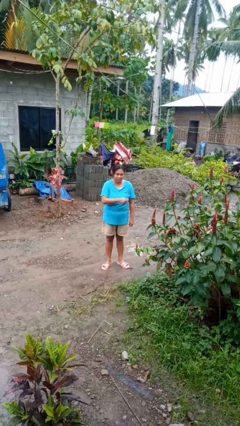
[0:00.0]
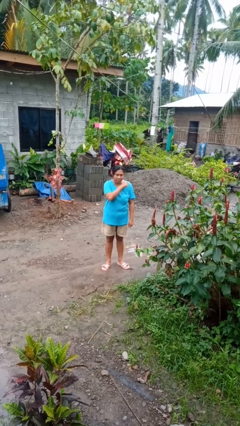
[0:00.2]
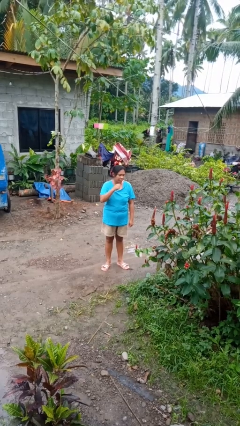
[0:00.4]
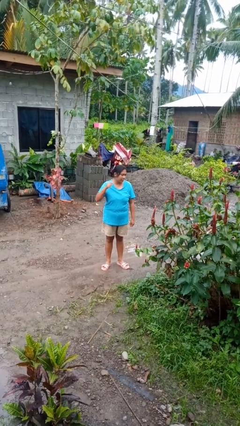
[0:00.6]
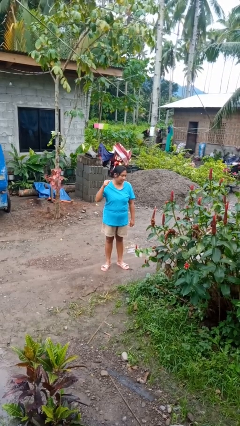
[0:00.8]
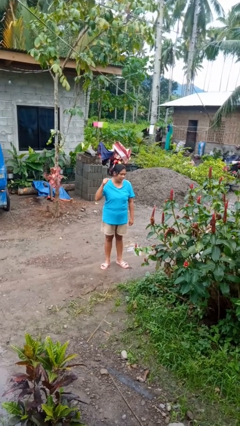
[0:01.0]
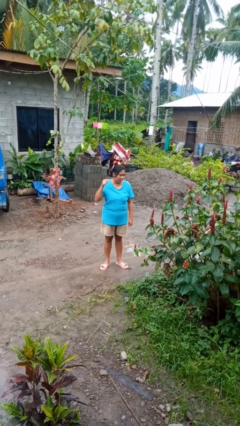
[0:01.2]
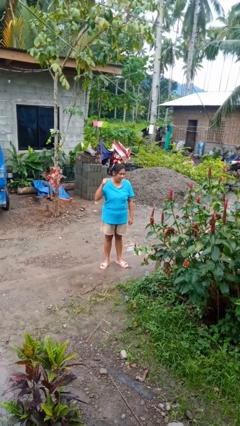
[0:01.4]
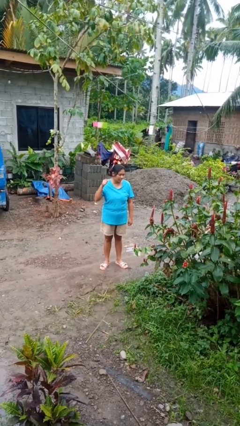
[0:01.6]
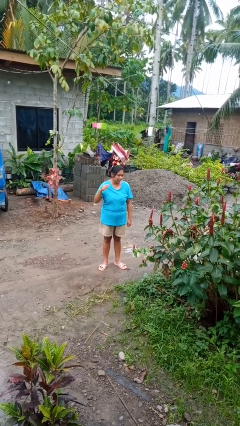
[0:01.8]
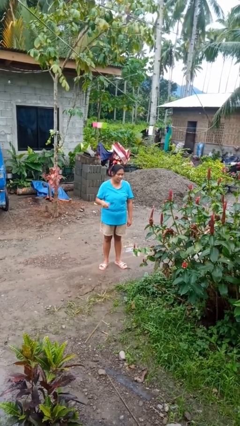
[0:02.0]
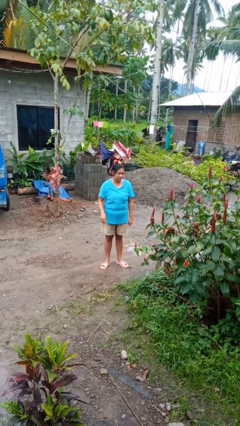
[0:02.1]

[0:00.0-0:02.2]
person gestures cut

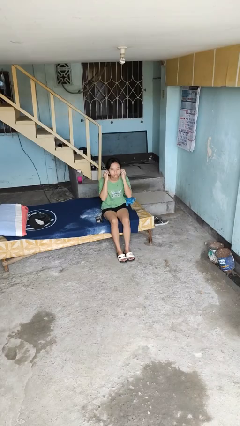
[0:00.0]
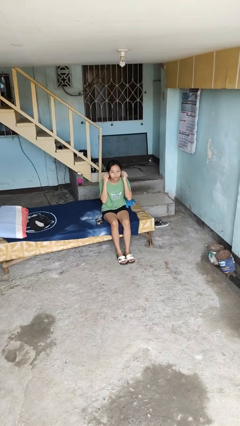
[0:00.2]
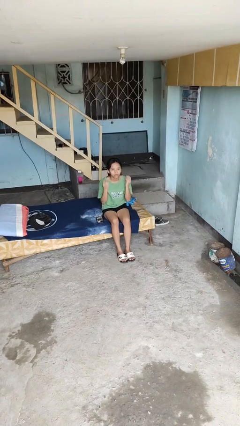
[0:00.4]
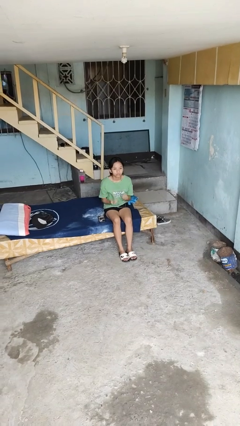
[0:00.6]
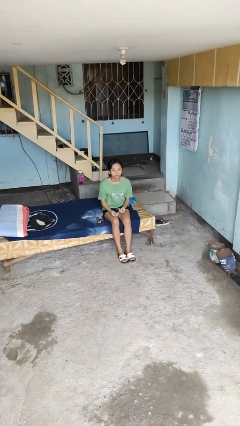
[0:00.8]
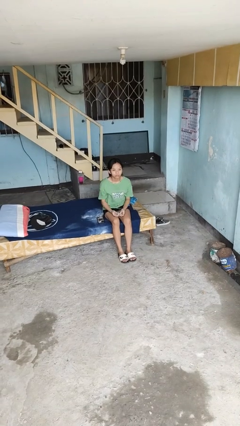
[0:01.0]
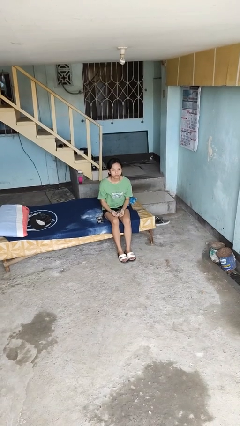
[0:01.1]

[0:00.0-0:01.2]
person takes off headphones

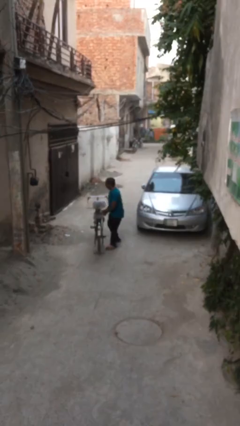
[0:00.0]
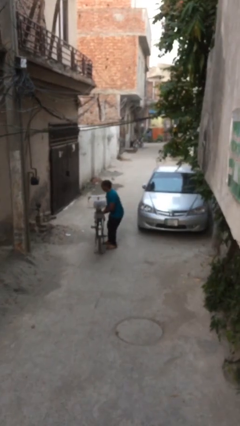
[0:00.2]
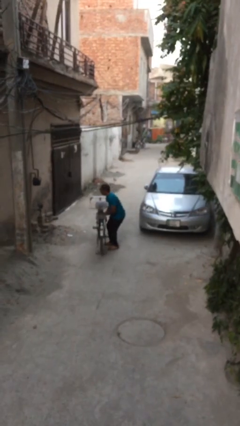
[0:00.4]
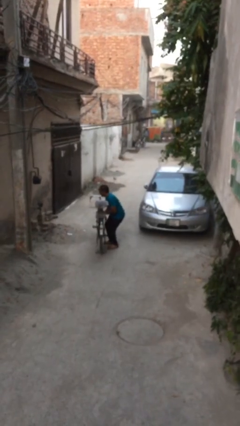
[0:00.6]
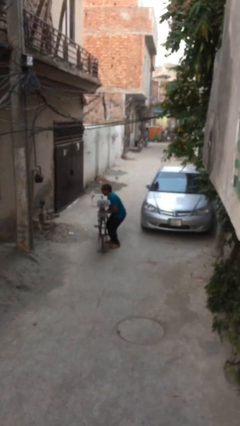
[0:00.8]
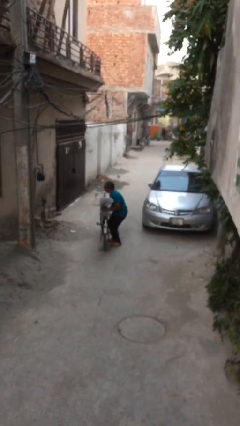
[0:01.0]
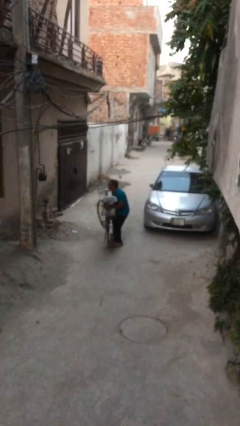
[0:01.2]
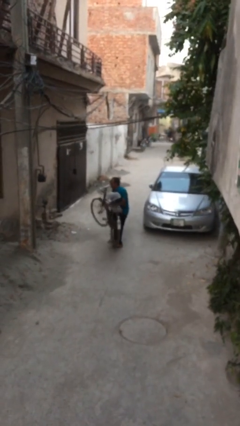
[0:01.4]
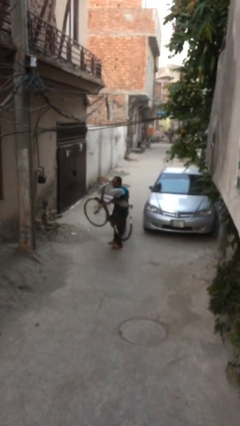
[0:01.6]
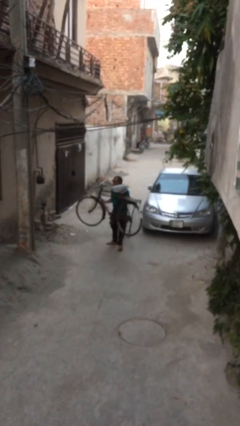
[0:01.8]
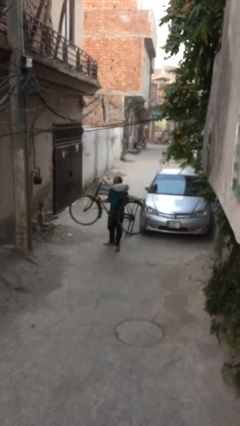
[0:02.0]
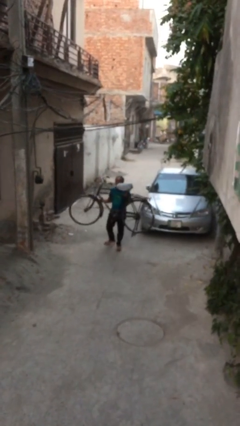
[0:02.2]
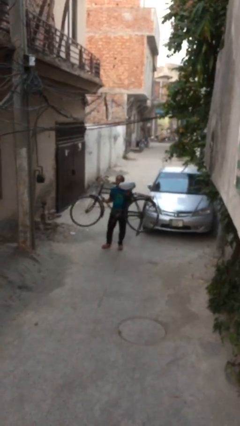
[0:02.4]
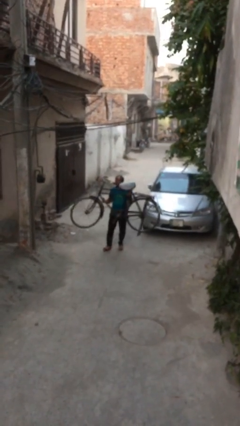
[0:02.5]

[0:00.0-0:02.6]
person picks up object from floor

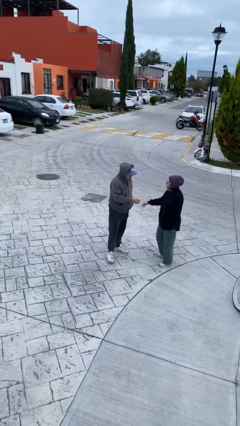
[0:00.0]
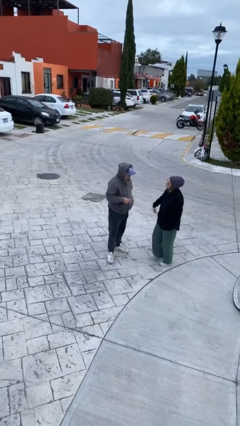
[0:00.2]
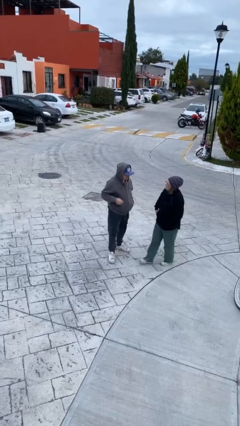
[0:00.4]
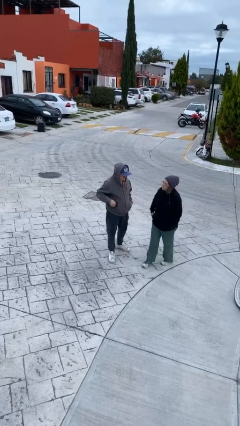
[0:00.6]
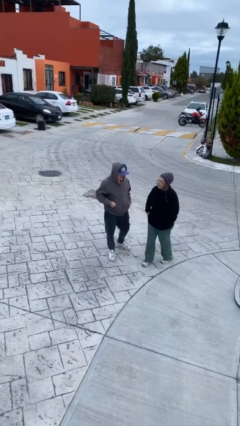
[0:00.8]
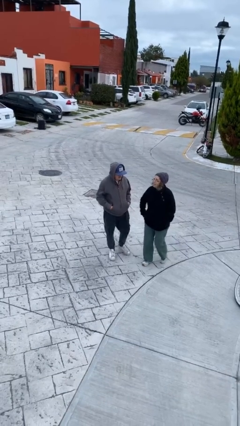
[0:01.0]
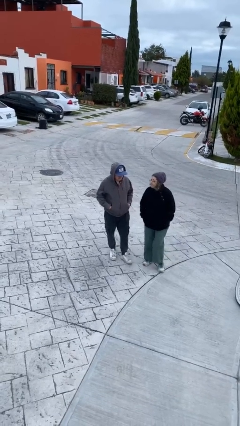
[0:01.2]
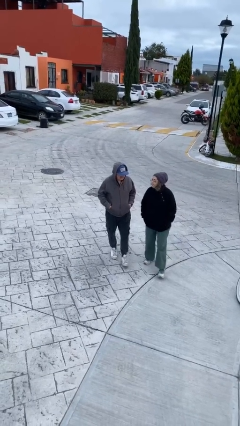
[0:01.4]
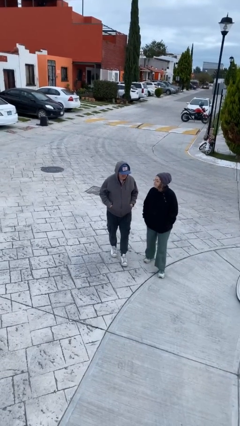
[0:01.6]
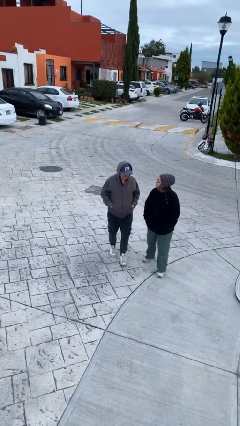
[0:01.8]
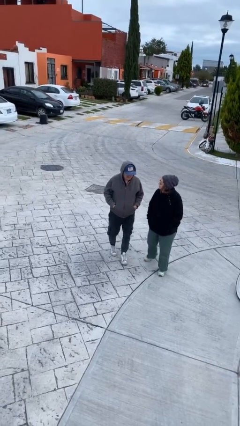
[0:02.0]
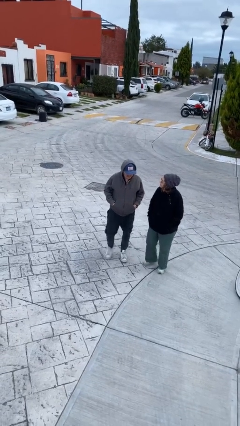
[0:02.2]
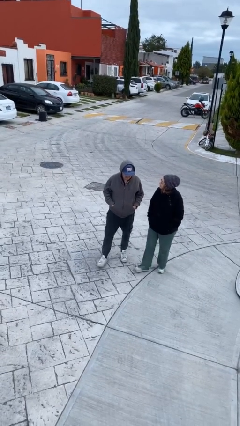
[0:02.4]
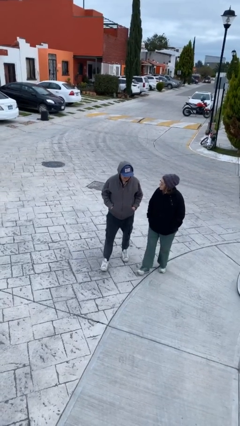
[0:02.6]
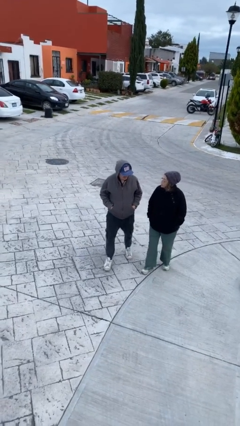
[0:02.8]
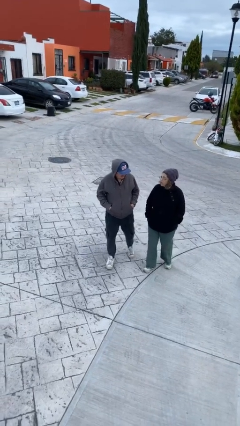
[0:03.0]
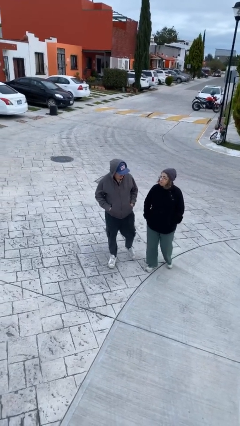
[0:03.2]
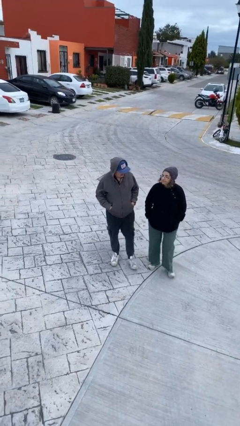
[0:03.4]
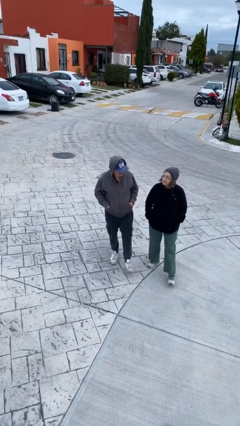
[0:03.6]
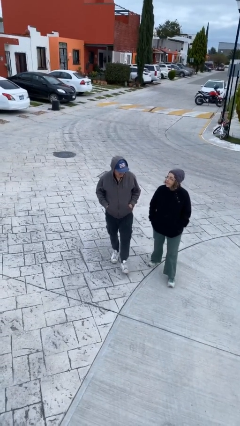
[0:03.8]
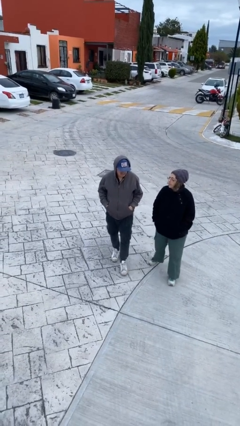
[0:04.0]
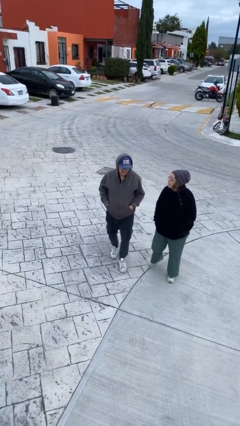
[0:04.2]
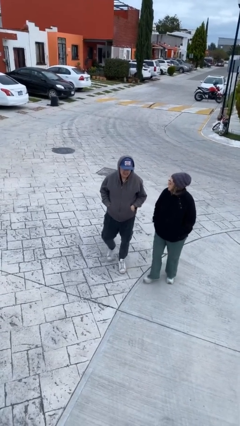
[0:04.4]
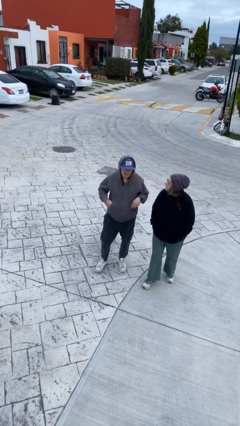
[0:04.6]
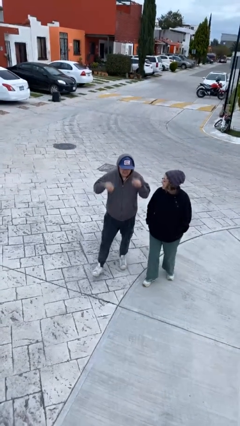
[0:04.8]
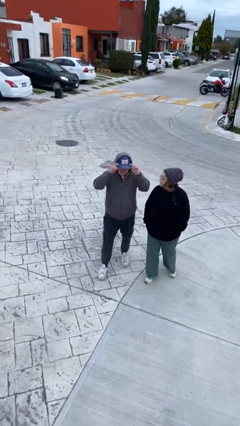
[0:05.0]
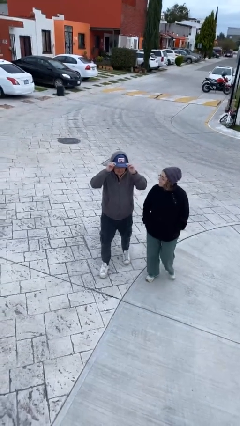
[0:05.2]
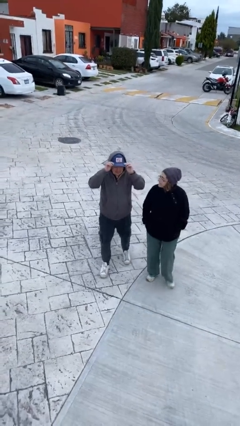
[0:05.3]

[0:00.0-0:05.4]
person talks to person

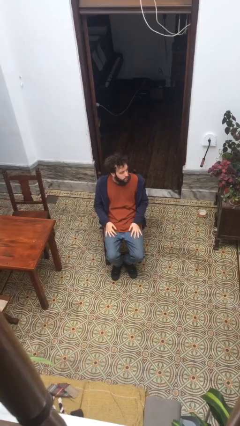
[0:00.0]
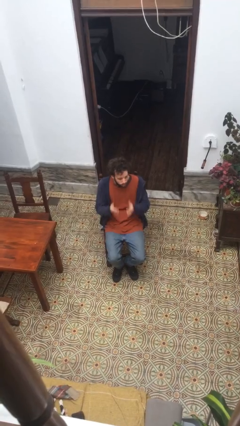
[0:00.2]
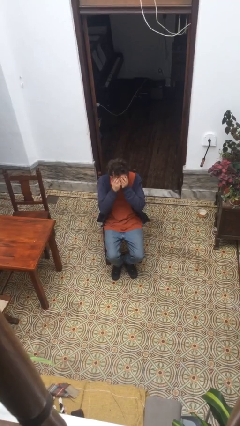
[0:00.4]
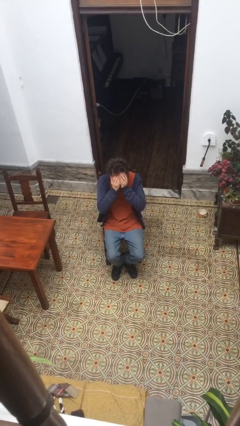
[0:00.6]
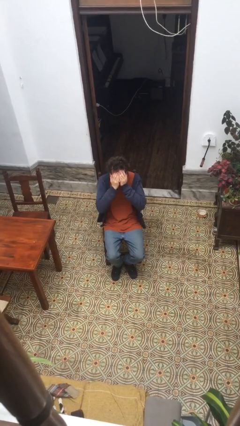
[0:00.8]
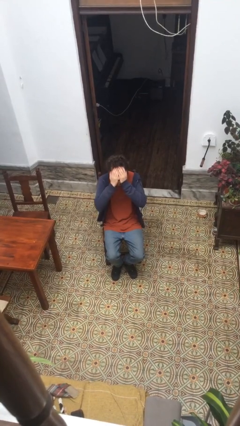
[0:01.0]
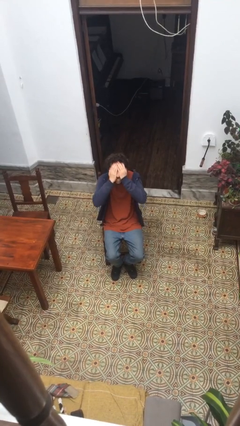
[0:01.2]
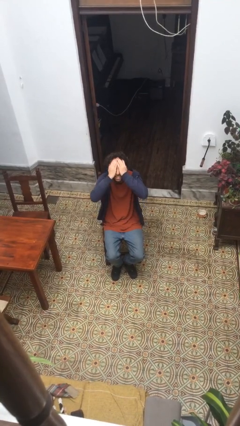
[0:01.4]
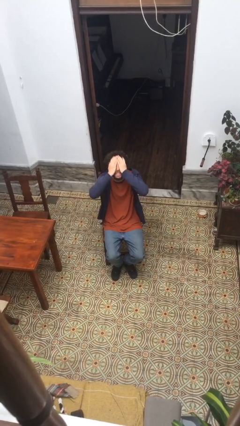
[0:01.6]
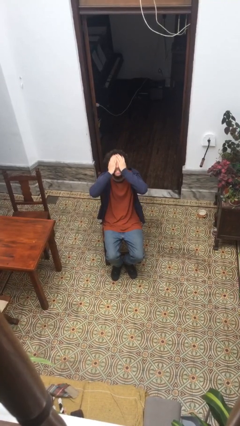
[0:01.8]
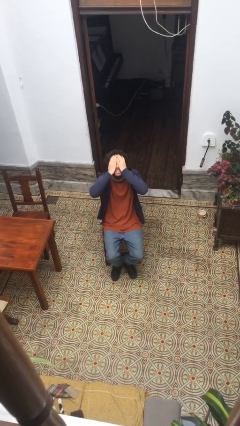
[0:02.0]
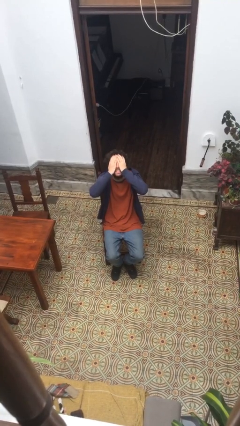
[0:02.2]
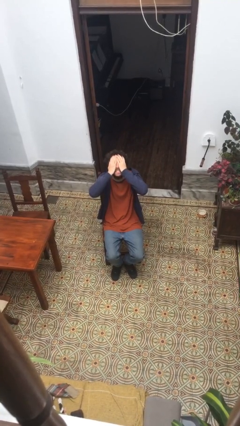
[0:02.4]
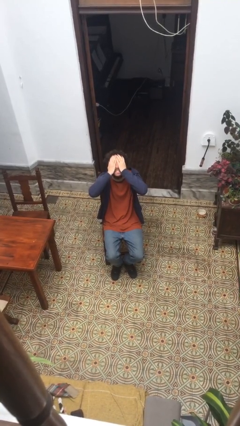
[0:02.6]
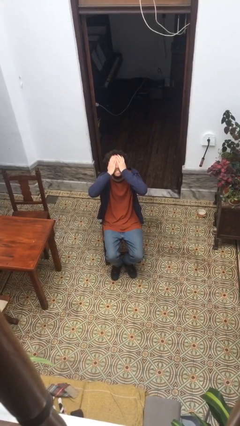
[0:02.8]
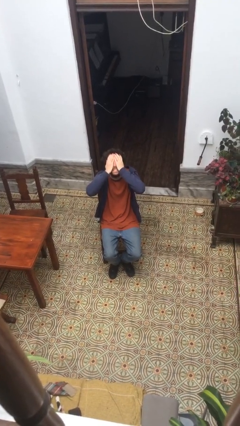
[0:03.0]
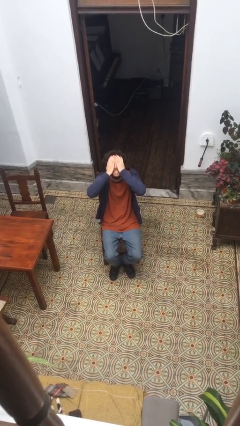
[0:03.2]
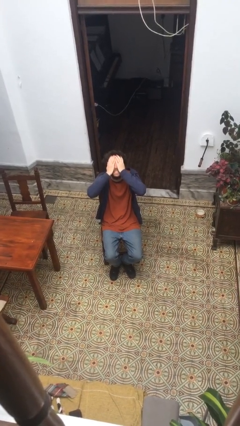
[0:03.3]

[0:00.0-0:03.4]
person covers face with hands

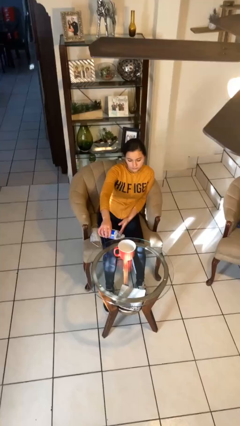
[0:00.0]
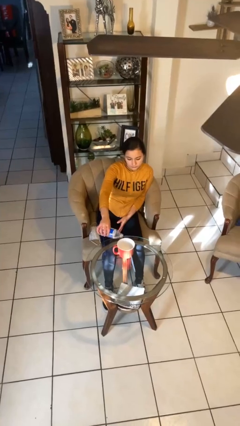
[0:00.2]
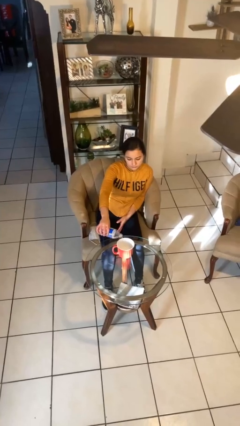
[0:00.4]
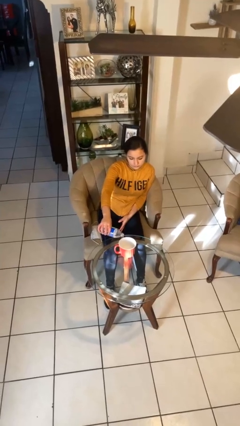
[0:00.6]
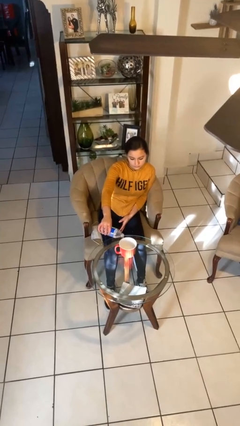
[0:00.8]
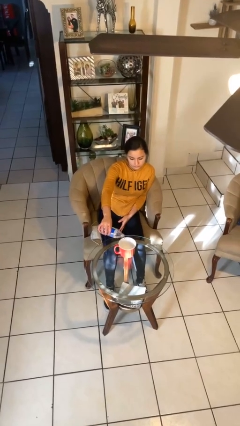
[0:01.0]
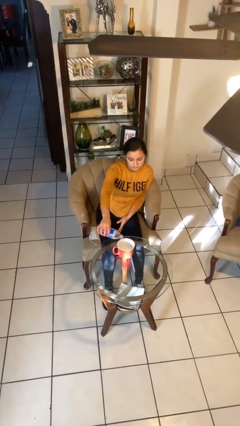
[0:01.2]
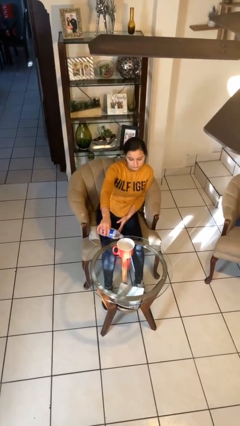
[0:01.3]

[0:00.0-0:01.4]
person pours liquid into cup

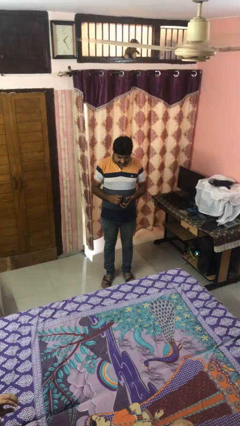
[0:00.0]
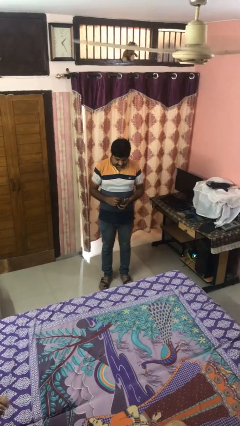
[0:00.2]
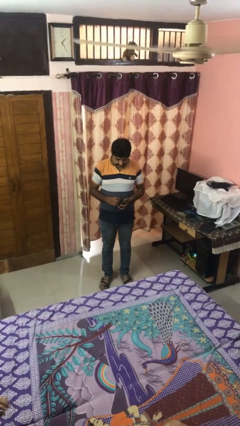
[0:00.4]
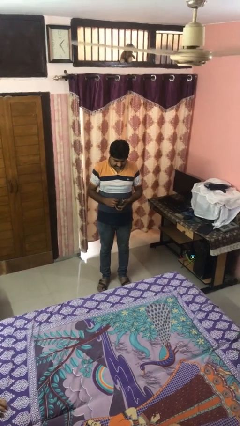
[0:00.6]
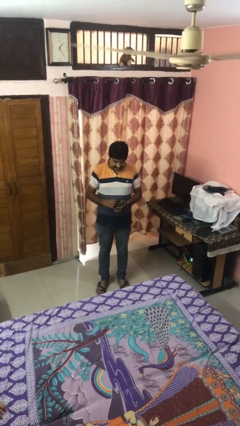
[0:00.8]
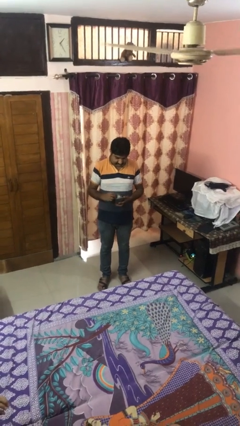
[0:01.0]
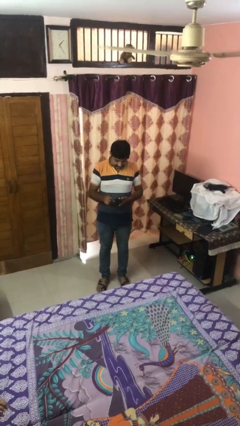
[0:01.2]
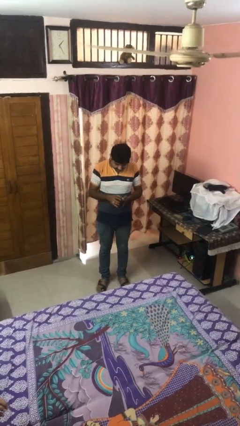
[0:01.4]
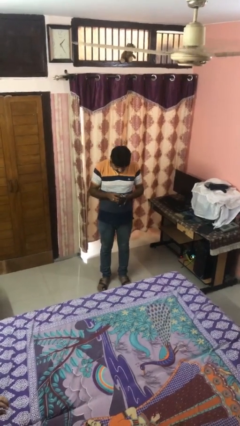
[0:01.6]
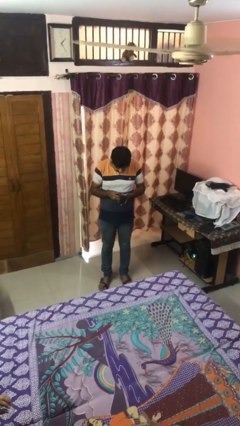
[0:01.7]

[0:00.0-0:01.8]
person searches in purse
